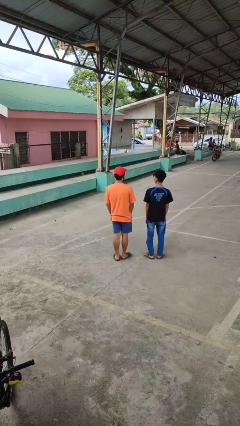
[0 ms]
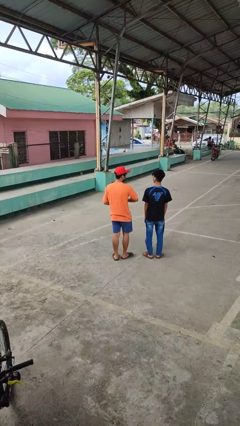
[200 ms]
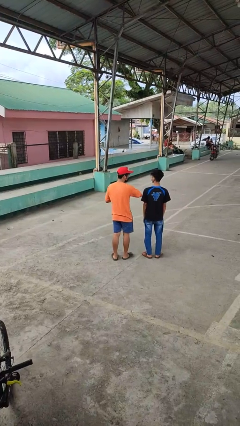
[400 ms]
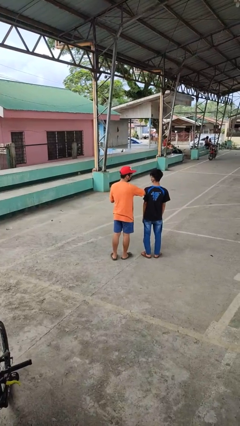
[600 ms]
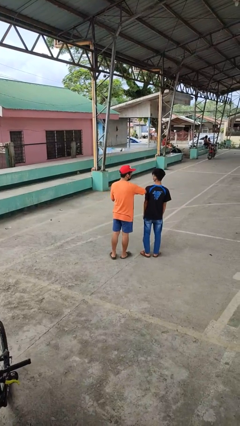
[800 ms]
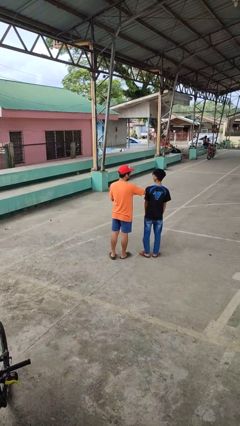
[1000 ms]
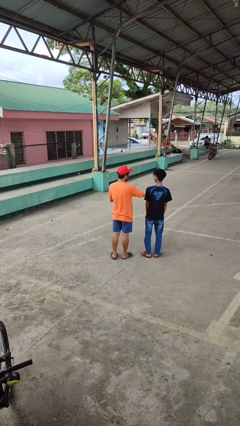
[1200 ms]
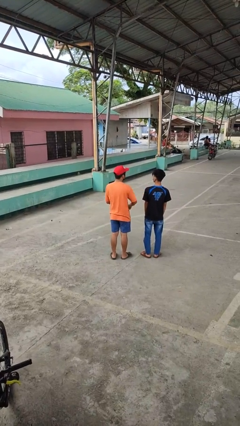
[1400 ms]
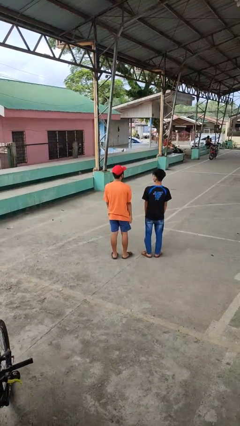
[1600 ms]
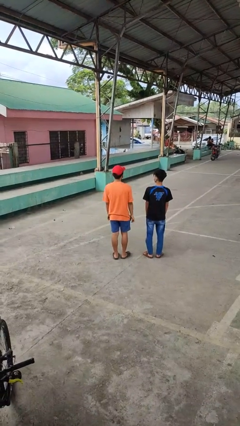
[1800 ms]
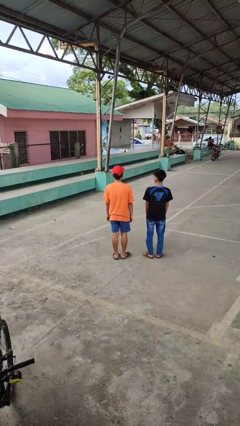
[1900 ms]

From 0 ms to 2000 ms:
person nudges person with elbow

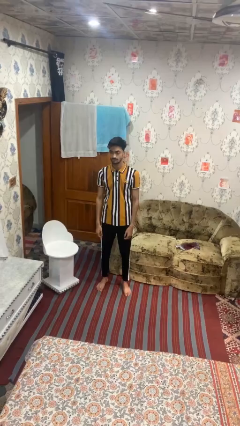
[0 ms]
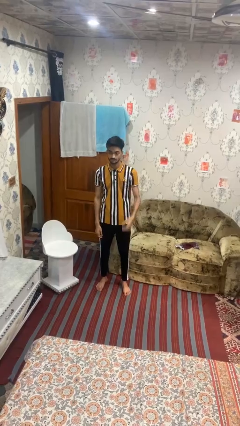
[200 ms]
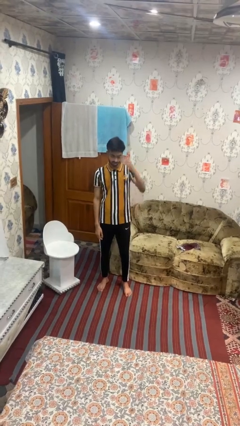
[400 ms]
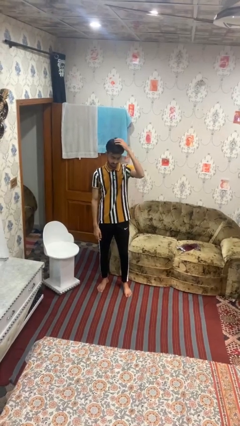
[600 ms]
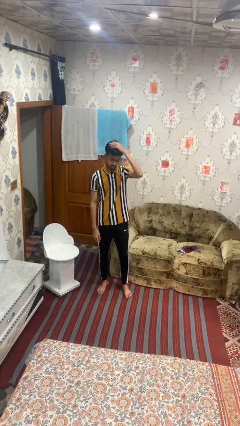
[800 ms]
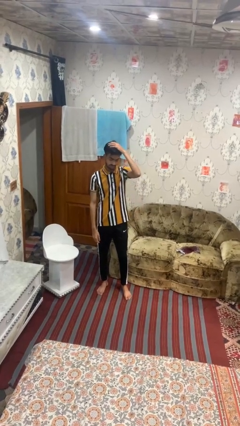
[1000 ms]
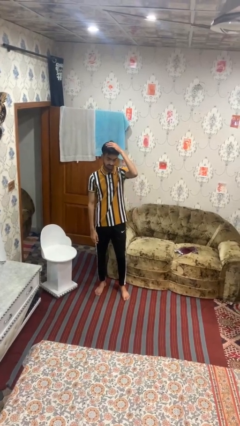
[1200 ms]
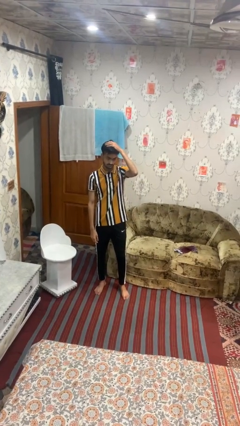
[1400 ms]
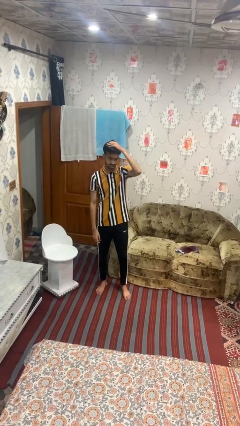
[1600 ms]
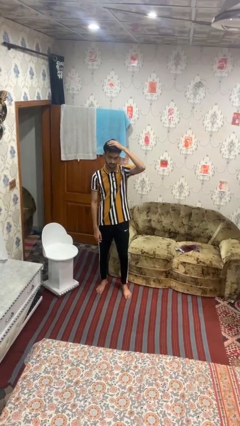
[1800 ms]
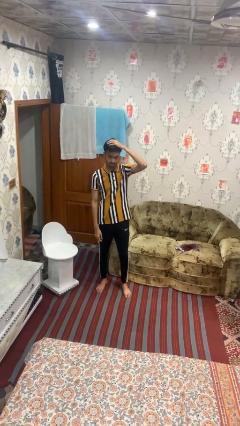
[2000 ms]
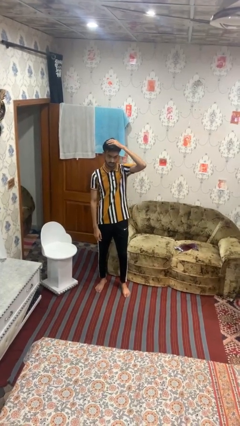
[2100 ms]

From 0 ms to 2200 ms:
person pats head

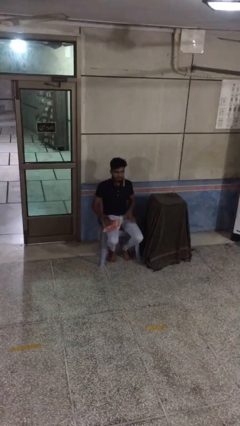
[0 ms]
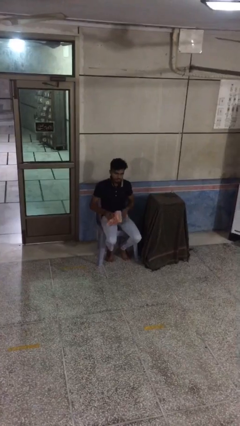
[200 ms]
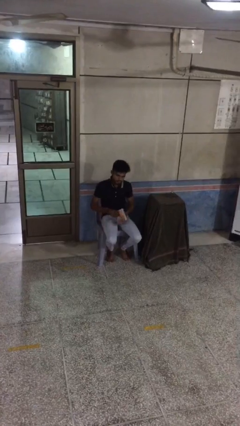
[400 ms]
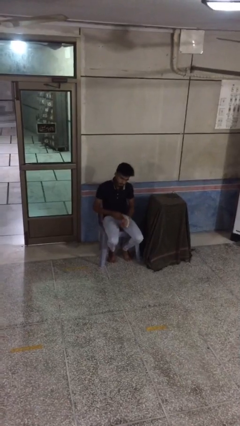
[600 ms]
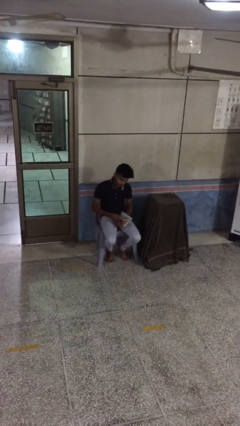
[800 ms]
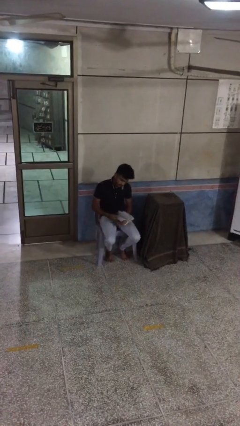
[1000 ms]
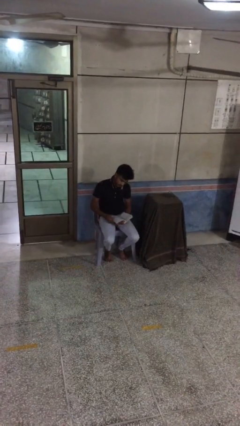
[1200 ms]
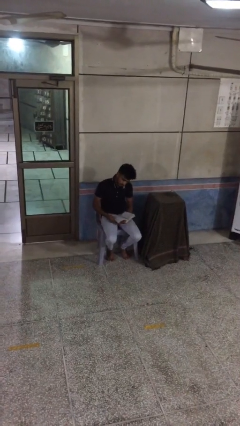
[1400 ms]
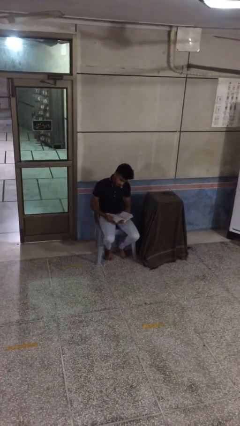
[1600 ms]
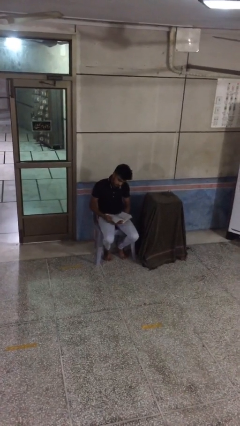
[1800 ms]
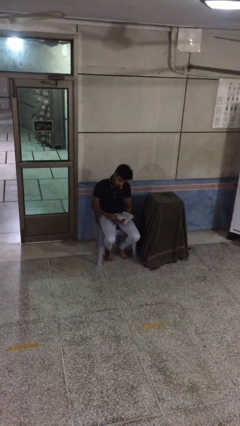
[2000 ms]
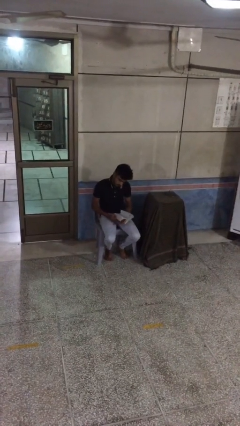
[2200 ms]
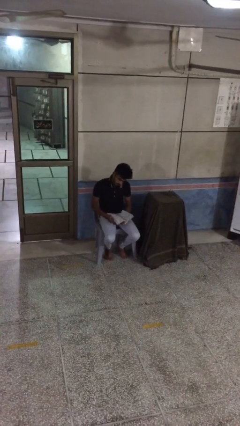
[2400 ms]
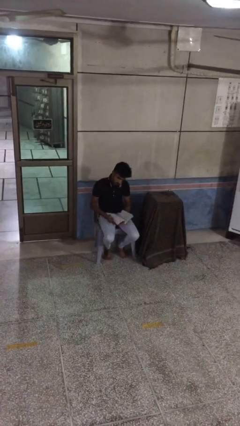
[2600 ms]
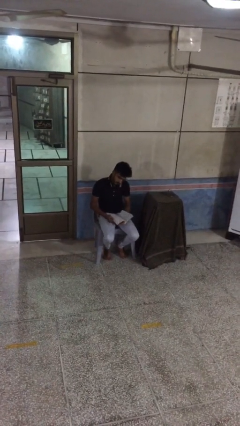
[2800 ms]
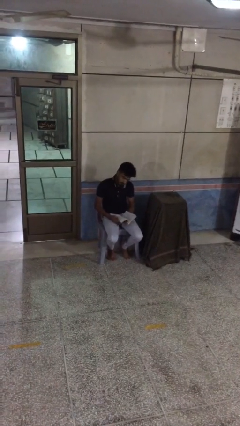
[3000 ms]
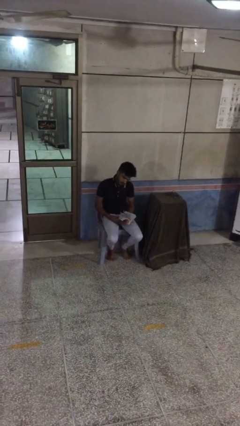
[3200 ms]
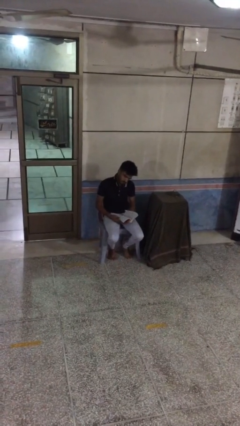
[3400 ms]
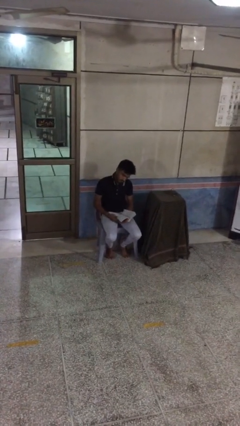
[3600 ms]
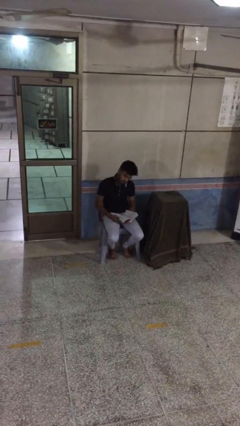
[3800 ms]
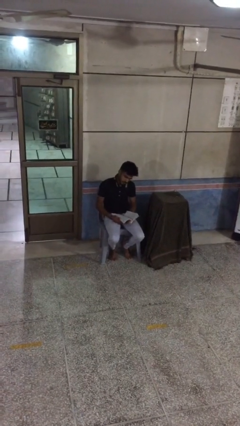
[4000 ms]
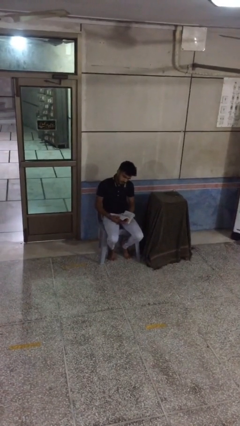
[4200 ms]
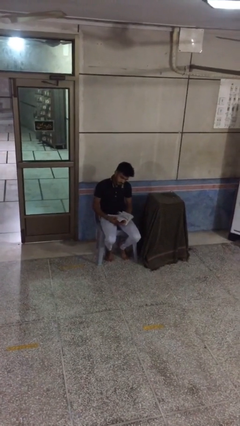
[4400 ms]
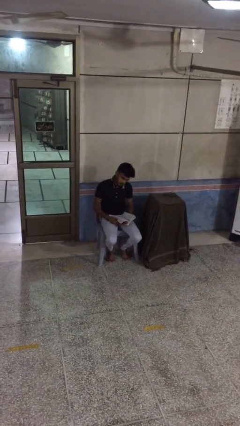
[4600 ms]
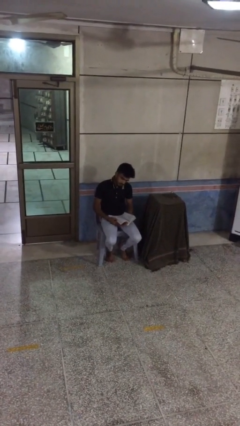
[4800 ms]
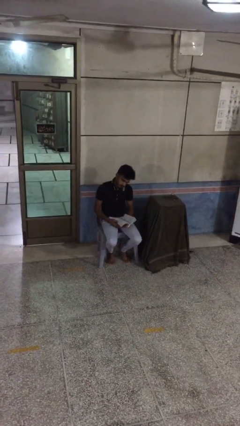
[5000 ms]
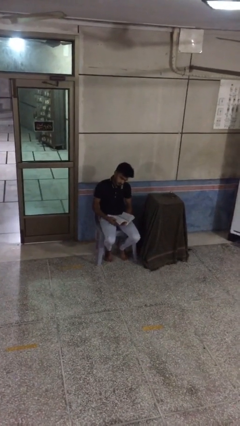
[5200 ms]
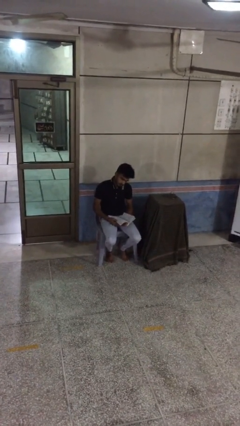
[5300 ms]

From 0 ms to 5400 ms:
person reads document

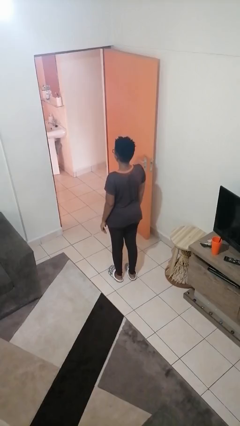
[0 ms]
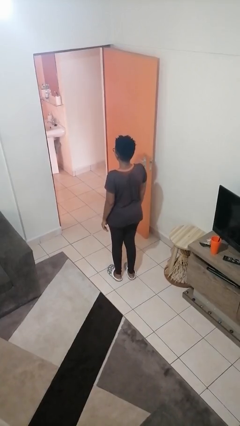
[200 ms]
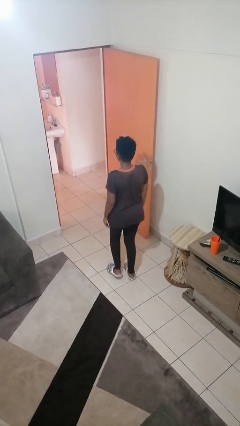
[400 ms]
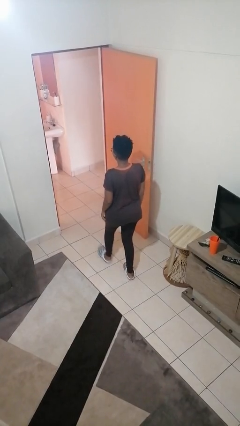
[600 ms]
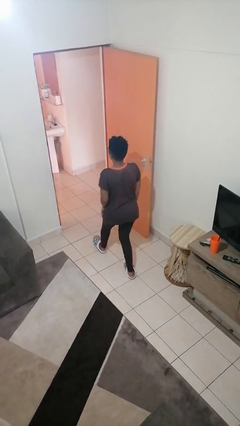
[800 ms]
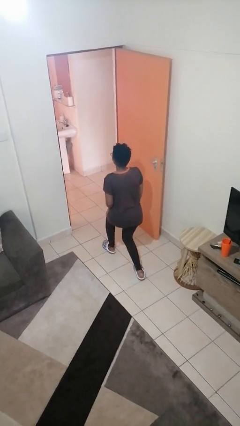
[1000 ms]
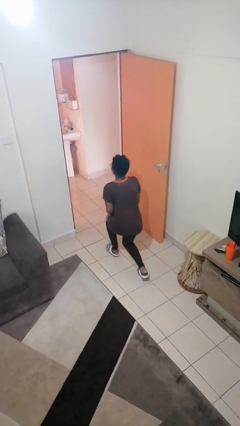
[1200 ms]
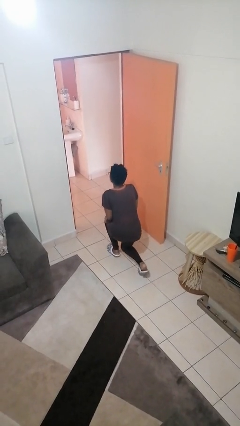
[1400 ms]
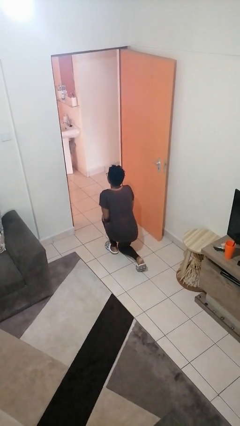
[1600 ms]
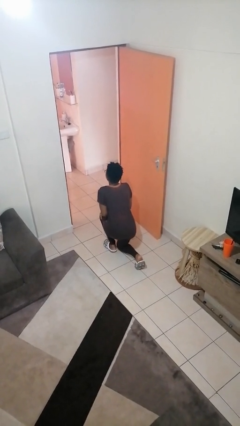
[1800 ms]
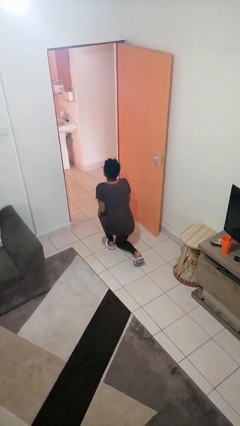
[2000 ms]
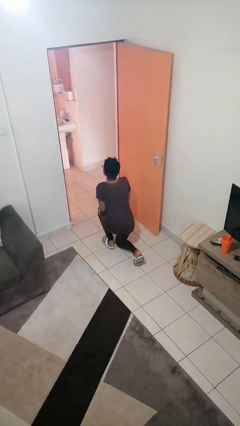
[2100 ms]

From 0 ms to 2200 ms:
person kneels

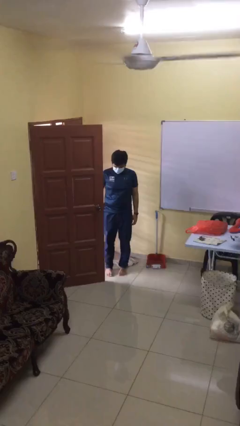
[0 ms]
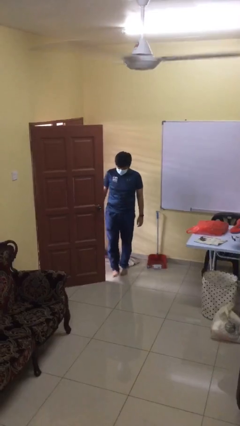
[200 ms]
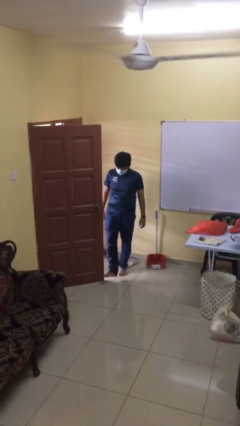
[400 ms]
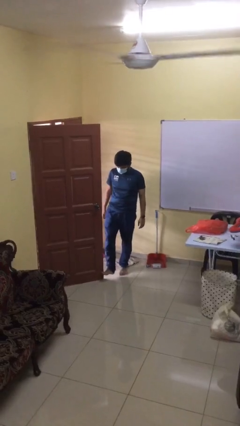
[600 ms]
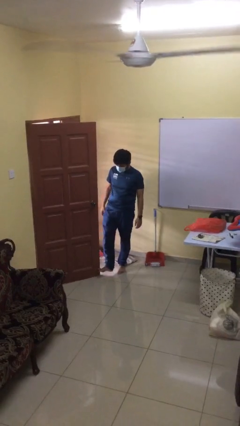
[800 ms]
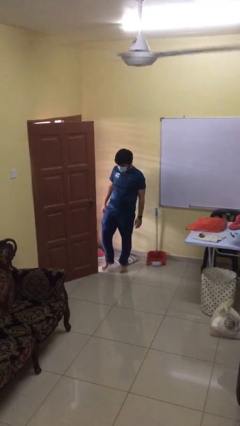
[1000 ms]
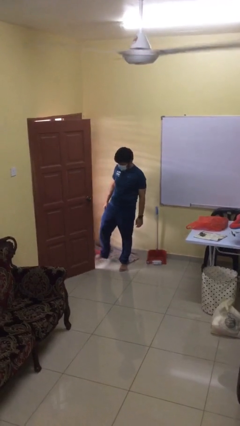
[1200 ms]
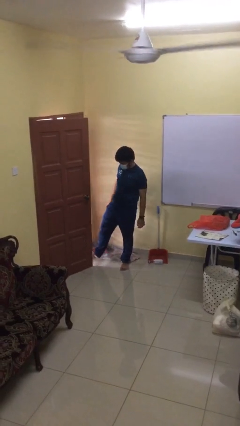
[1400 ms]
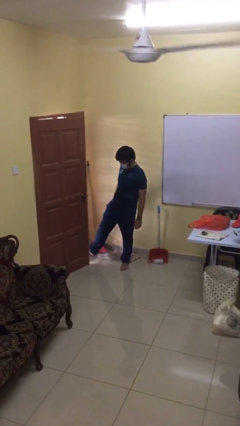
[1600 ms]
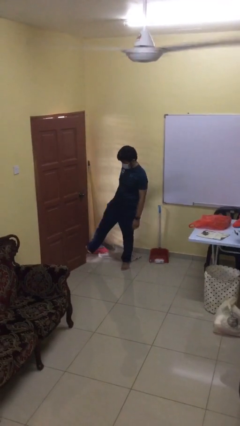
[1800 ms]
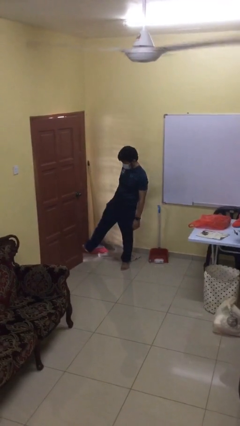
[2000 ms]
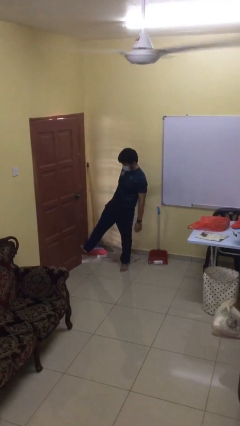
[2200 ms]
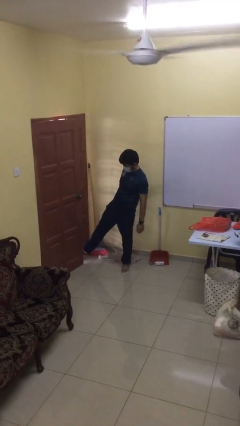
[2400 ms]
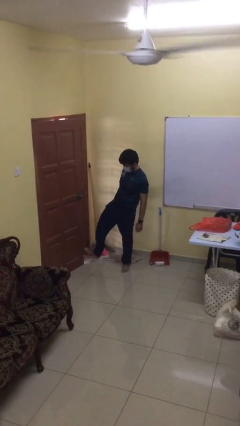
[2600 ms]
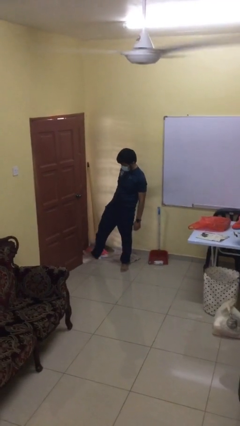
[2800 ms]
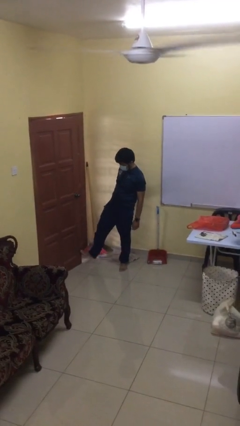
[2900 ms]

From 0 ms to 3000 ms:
person closes door with foot

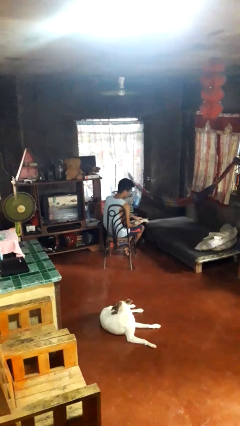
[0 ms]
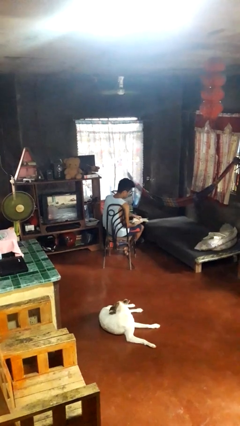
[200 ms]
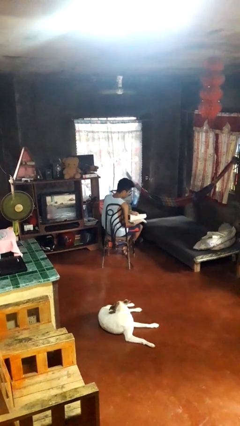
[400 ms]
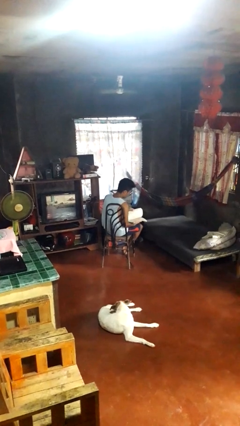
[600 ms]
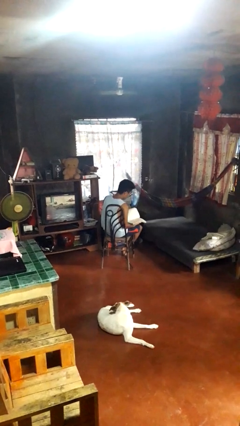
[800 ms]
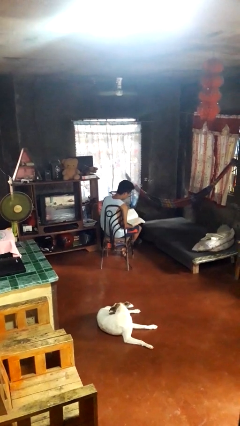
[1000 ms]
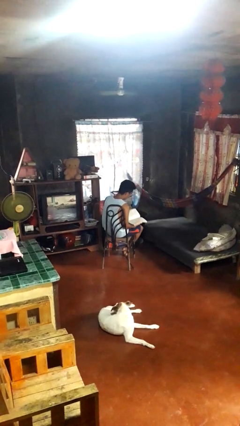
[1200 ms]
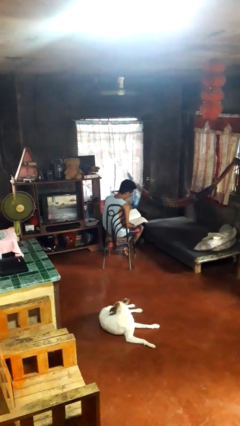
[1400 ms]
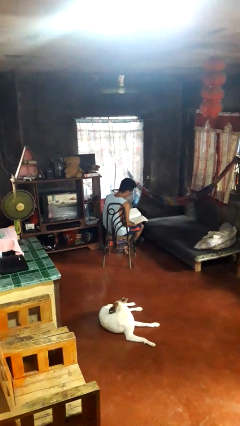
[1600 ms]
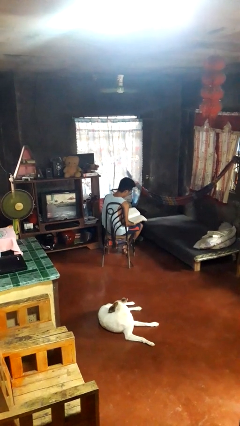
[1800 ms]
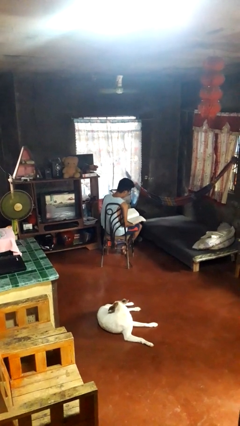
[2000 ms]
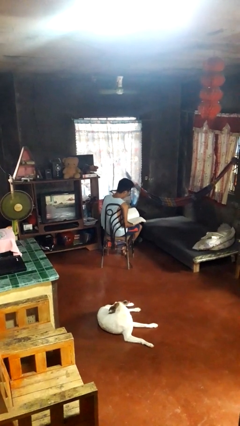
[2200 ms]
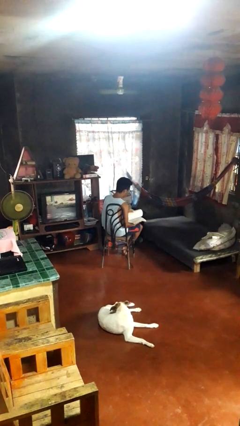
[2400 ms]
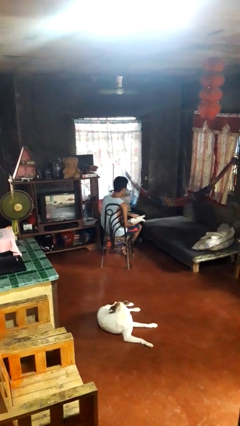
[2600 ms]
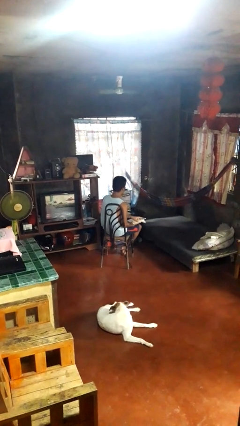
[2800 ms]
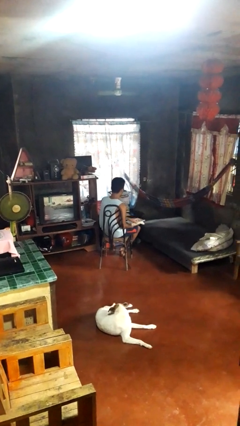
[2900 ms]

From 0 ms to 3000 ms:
person reads book
